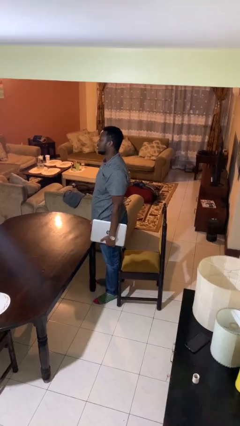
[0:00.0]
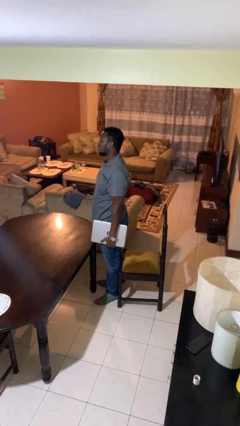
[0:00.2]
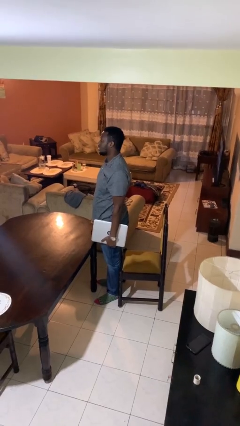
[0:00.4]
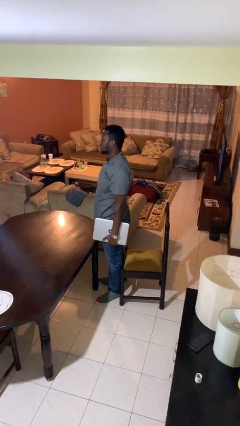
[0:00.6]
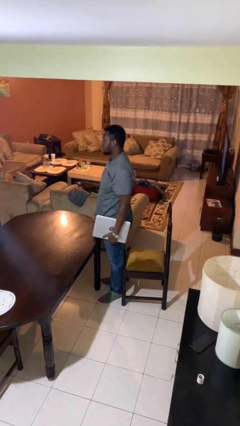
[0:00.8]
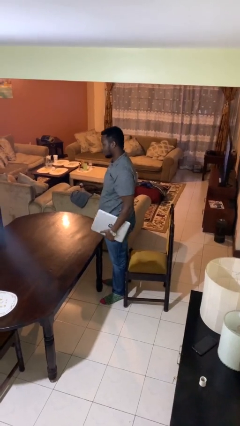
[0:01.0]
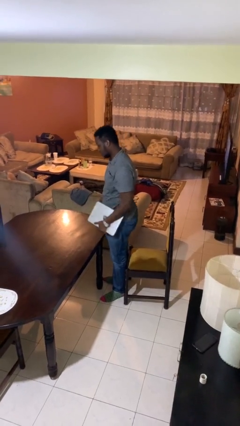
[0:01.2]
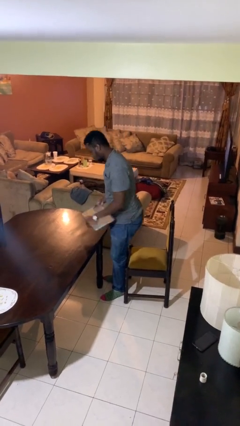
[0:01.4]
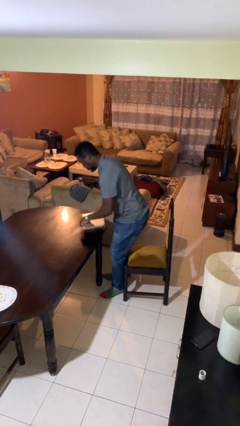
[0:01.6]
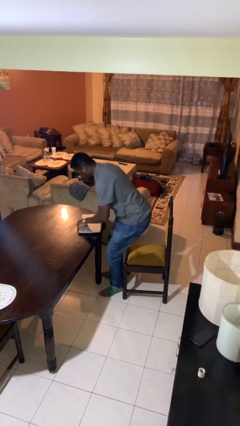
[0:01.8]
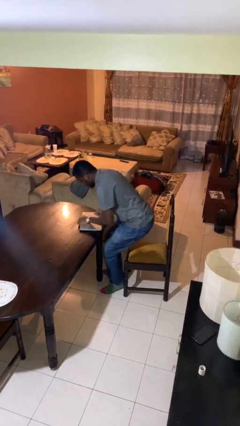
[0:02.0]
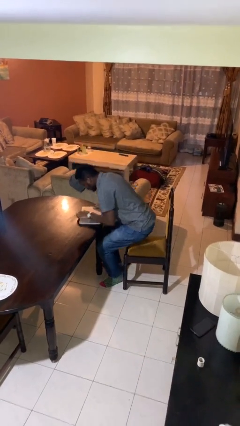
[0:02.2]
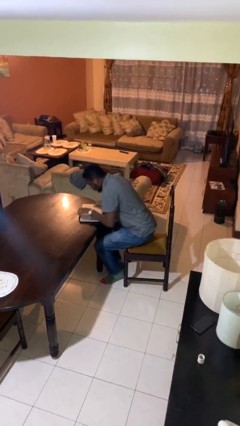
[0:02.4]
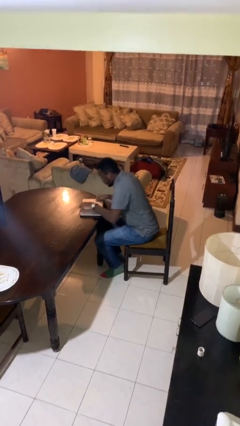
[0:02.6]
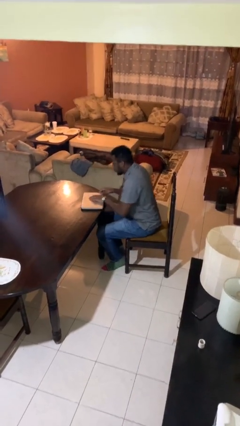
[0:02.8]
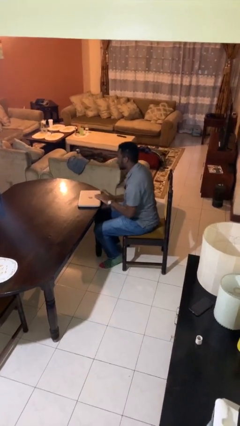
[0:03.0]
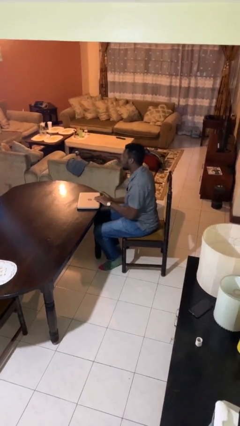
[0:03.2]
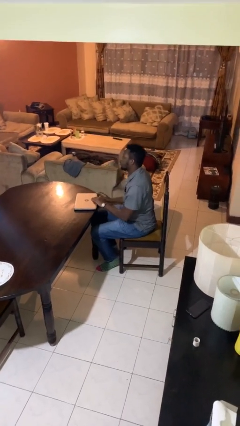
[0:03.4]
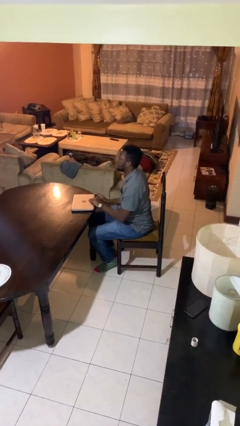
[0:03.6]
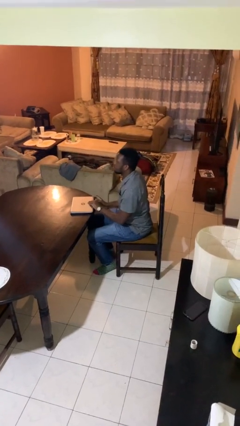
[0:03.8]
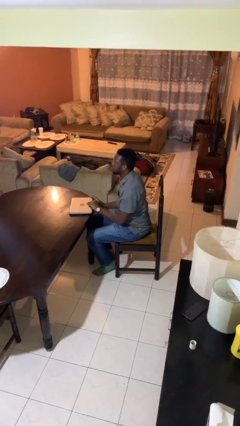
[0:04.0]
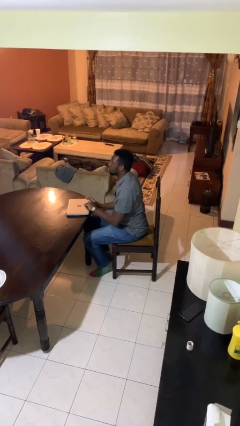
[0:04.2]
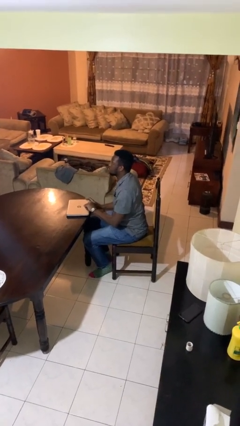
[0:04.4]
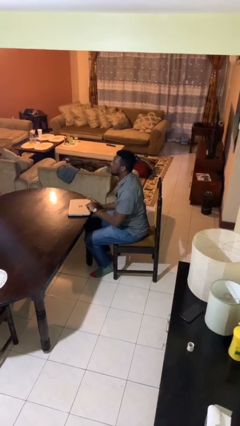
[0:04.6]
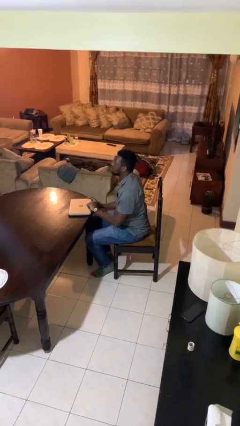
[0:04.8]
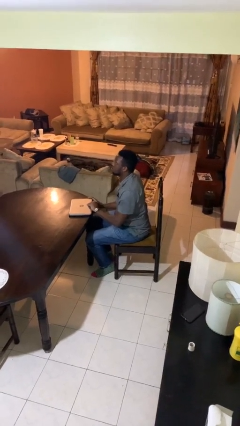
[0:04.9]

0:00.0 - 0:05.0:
person sits down

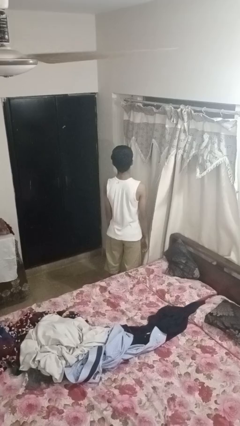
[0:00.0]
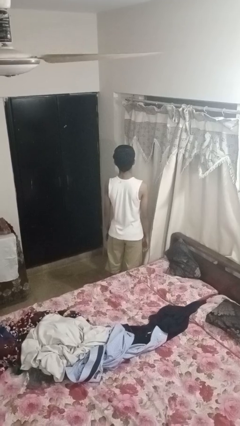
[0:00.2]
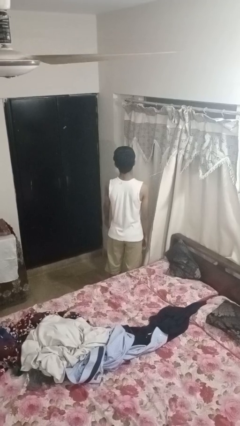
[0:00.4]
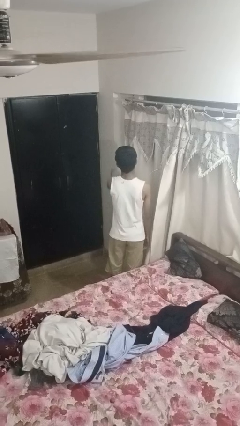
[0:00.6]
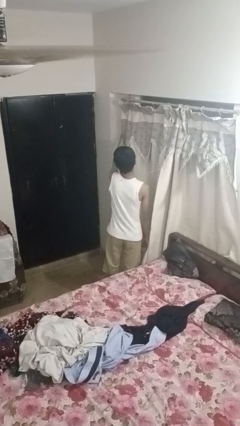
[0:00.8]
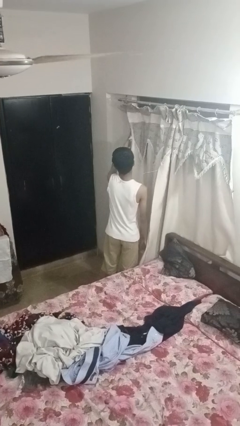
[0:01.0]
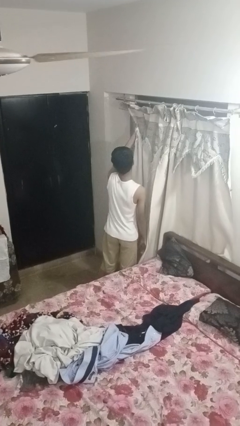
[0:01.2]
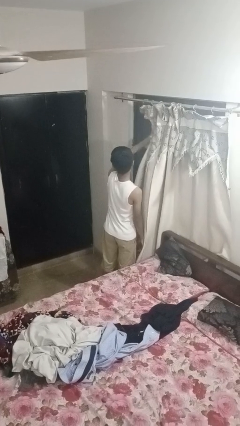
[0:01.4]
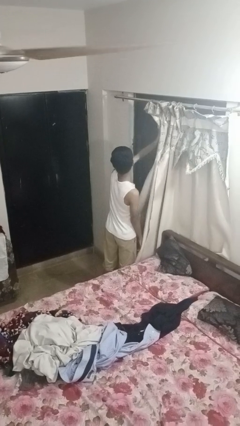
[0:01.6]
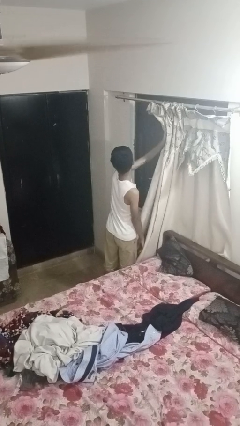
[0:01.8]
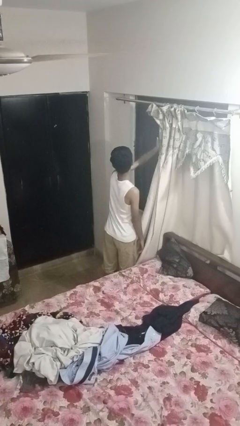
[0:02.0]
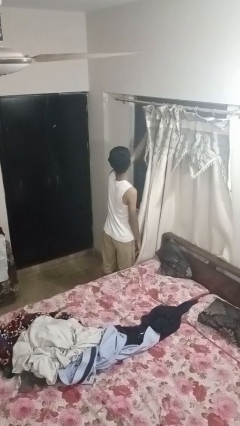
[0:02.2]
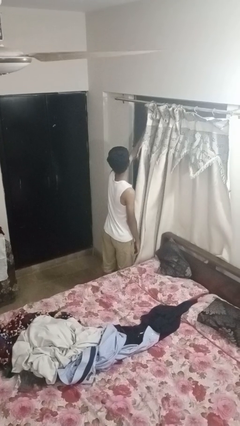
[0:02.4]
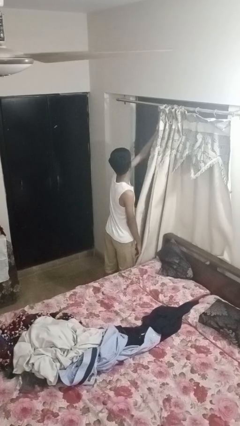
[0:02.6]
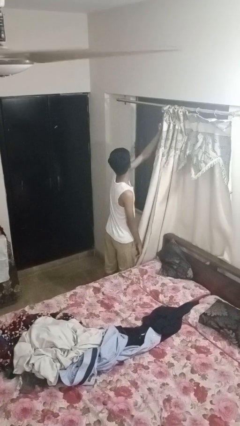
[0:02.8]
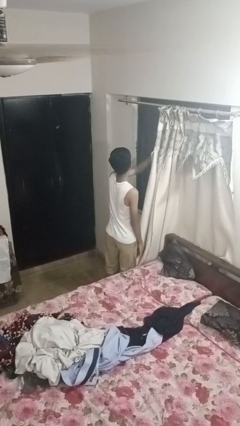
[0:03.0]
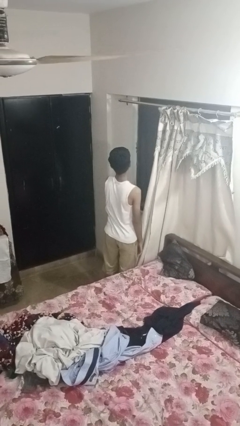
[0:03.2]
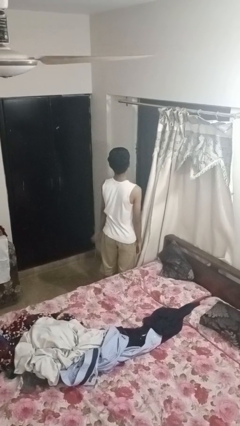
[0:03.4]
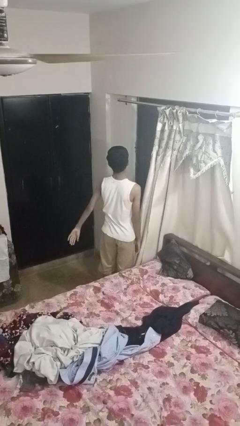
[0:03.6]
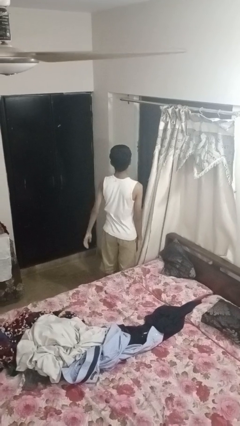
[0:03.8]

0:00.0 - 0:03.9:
person opens curtains

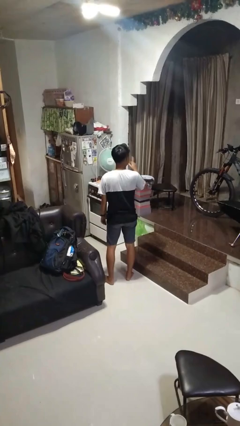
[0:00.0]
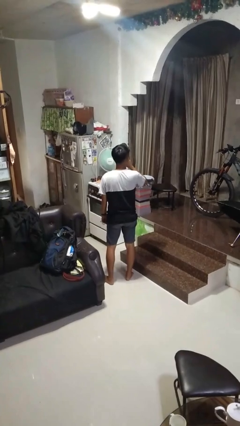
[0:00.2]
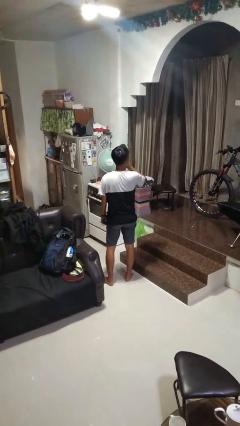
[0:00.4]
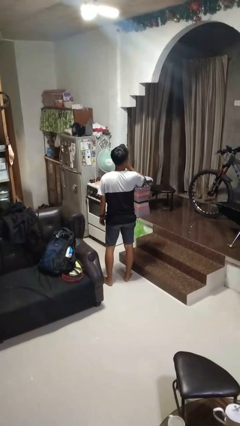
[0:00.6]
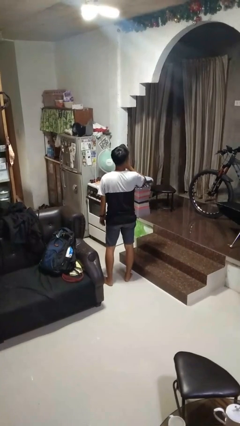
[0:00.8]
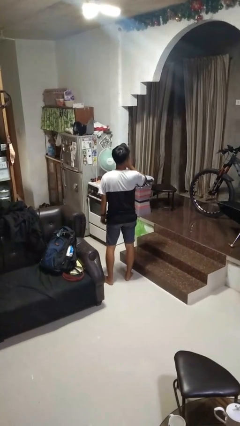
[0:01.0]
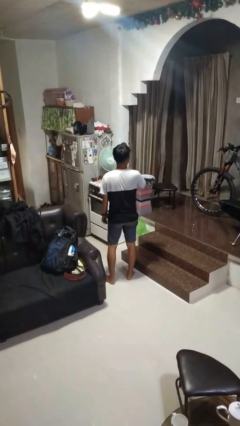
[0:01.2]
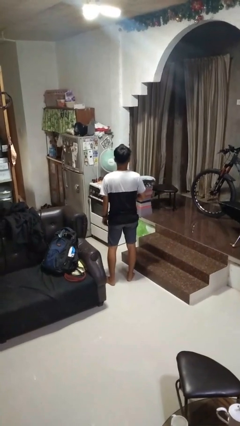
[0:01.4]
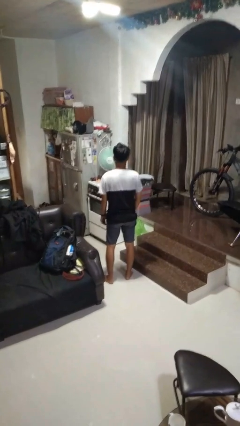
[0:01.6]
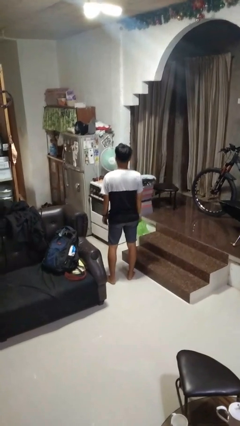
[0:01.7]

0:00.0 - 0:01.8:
person gestures be quiet

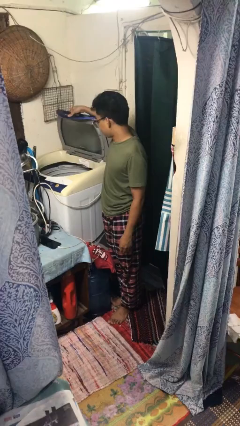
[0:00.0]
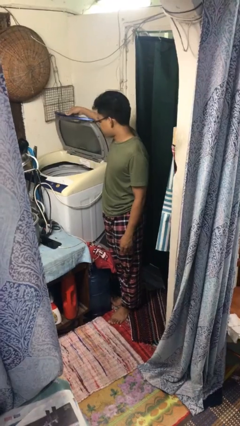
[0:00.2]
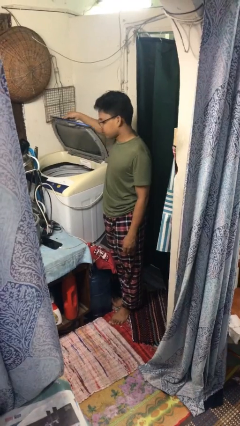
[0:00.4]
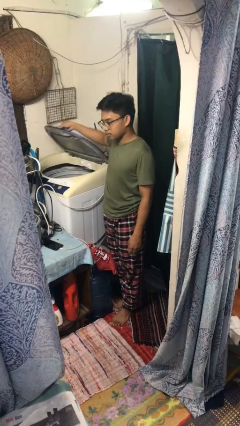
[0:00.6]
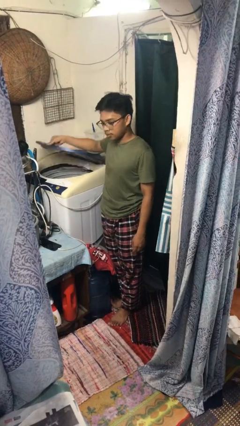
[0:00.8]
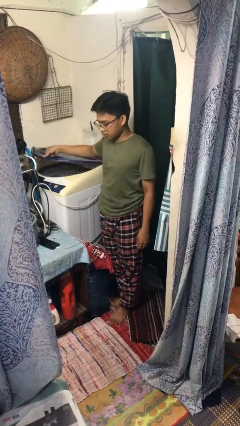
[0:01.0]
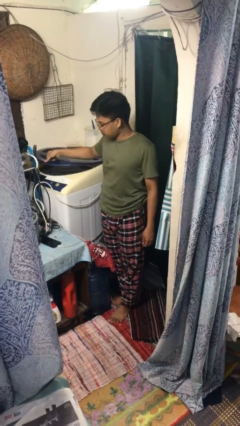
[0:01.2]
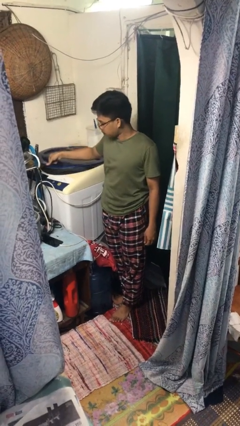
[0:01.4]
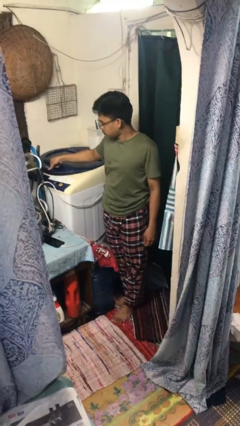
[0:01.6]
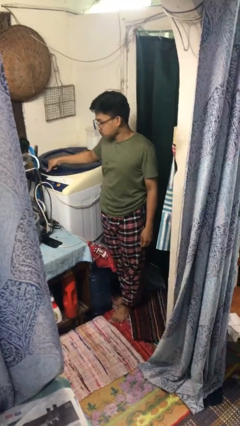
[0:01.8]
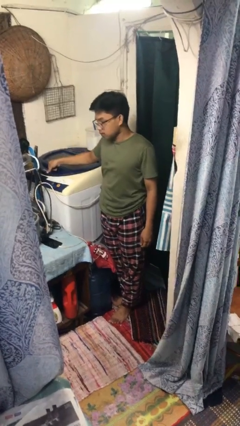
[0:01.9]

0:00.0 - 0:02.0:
person closes clothes washer

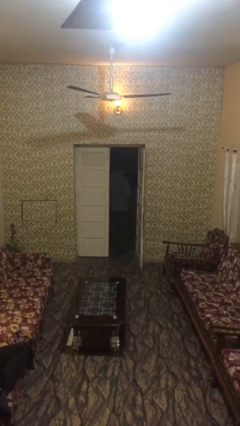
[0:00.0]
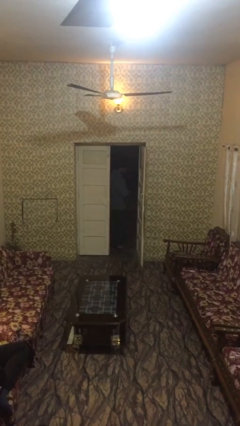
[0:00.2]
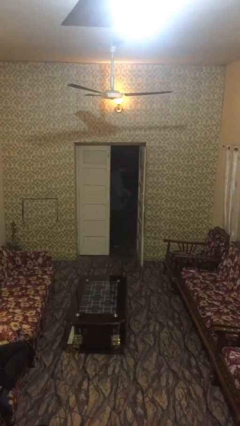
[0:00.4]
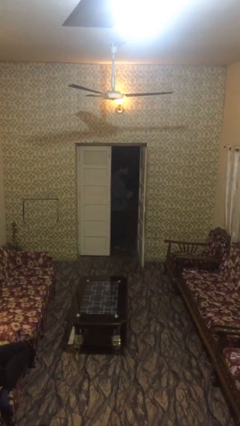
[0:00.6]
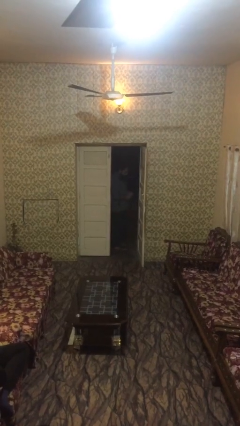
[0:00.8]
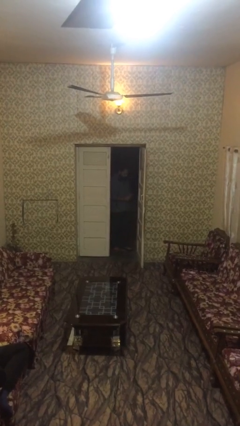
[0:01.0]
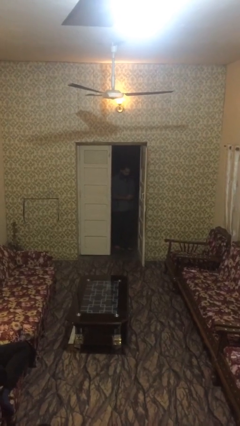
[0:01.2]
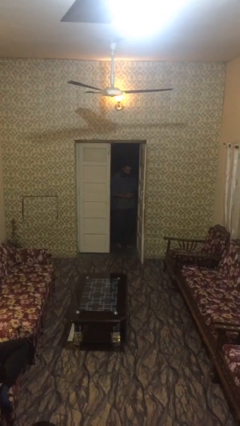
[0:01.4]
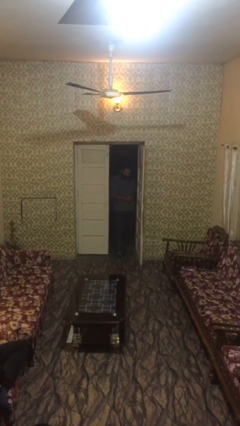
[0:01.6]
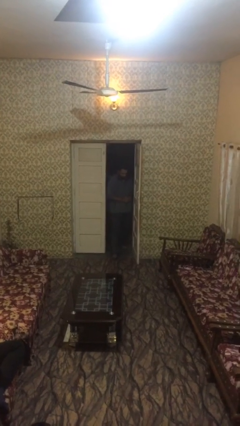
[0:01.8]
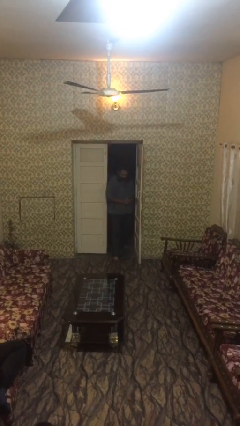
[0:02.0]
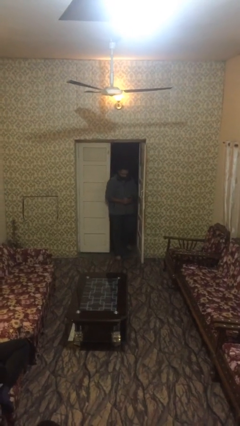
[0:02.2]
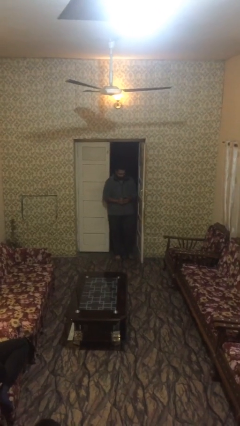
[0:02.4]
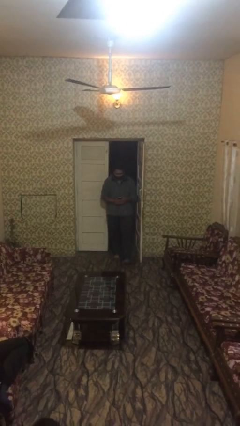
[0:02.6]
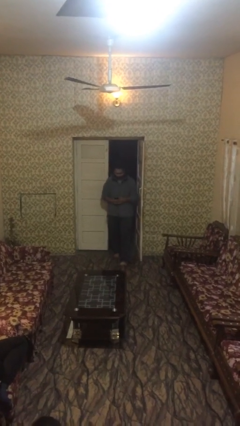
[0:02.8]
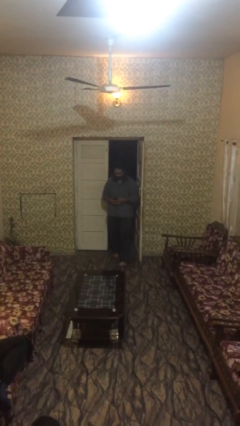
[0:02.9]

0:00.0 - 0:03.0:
person enters scene through structure

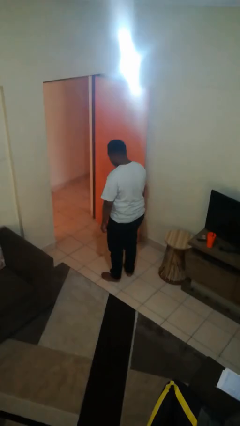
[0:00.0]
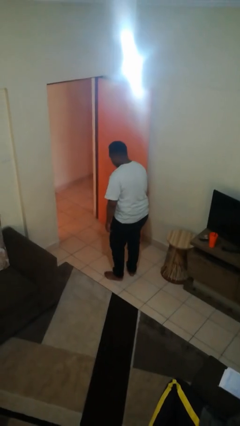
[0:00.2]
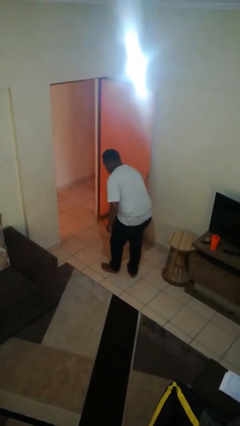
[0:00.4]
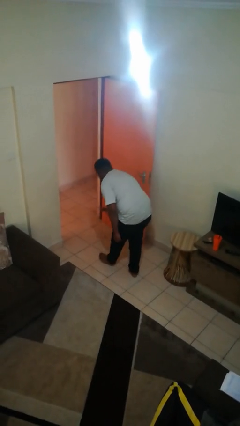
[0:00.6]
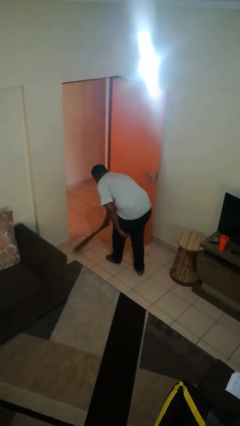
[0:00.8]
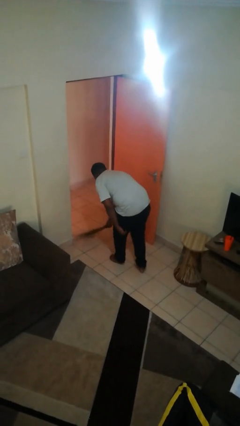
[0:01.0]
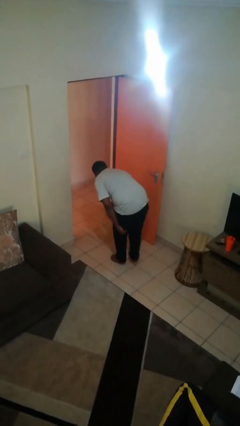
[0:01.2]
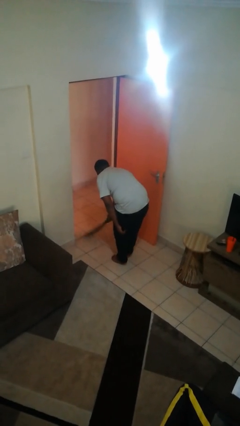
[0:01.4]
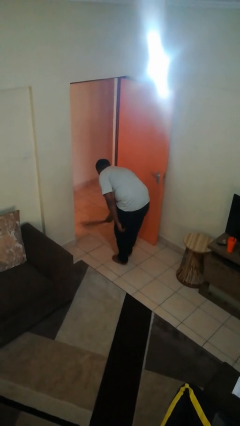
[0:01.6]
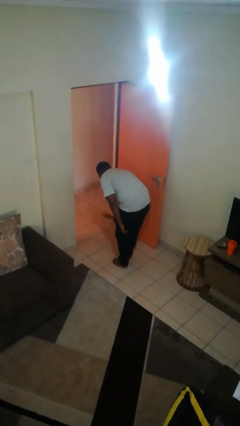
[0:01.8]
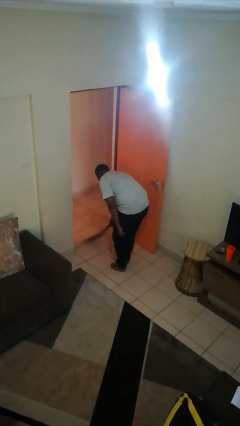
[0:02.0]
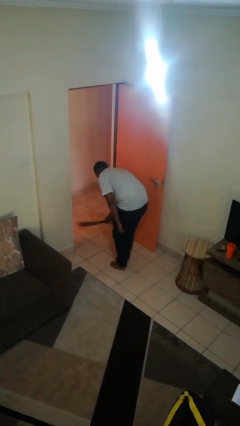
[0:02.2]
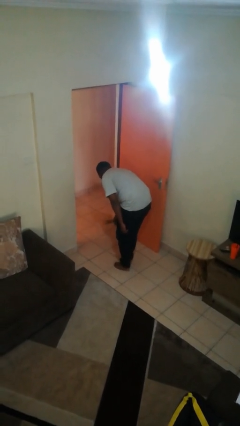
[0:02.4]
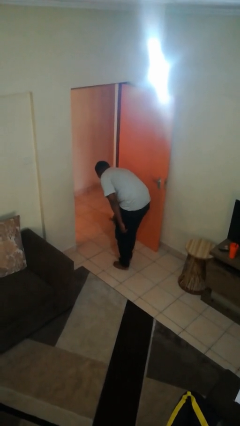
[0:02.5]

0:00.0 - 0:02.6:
person sweeps floor
